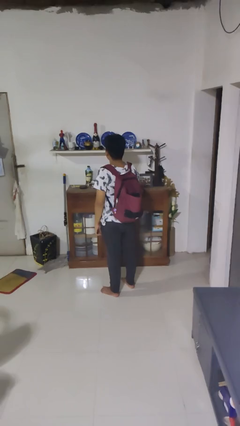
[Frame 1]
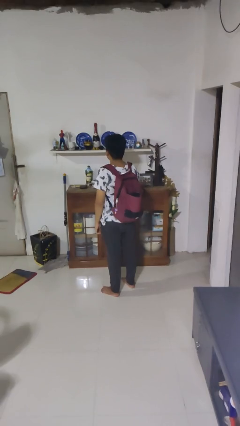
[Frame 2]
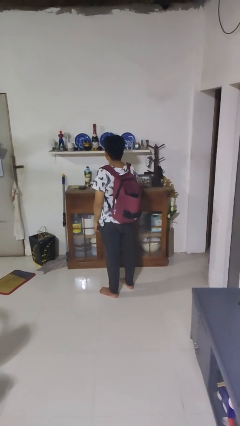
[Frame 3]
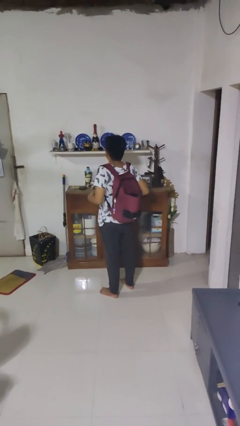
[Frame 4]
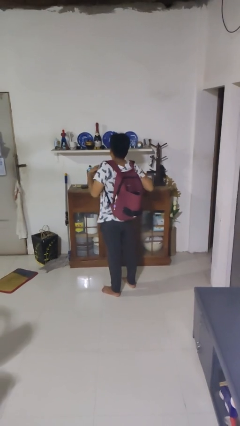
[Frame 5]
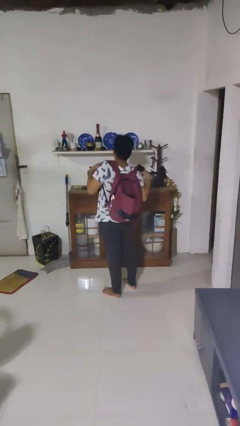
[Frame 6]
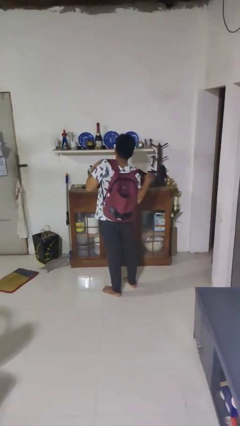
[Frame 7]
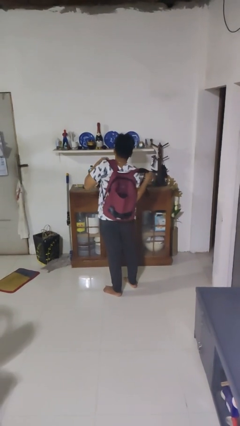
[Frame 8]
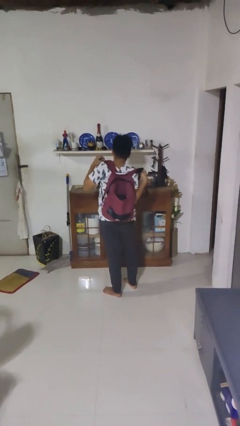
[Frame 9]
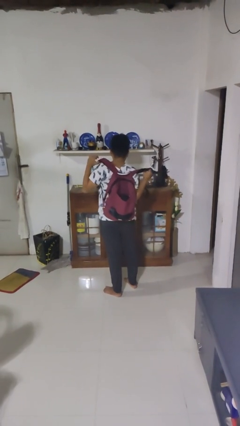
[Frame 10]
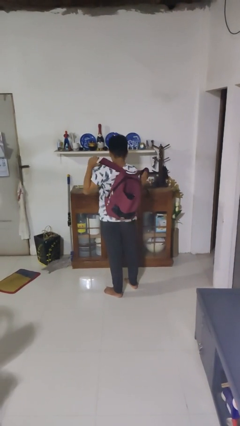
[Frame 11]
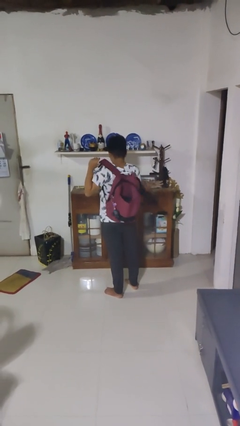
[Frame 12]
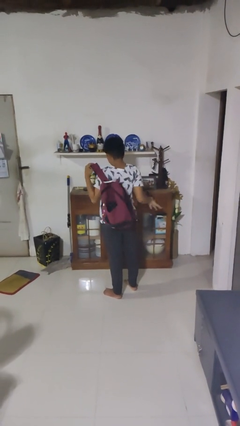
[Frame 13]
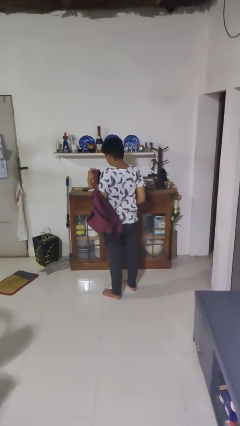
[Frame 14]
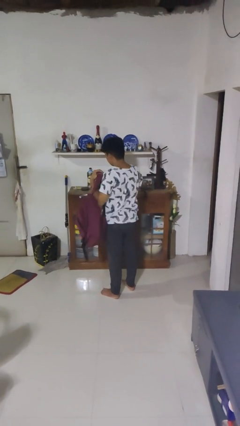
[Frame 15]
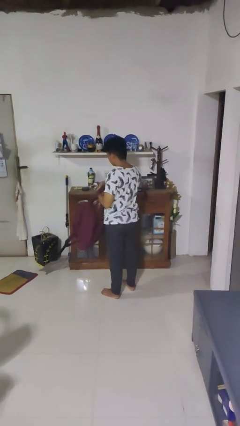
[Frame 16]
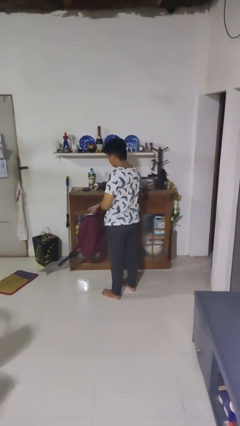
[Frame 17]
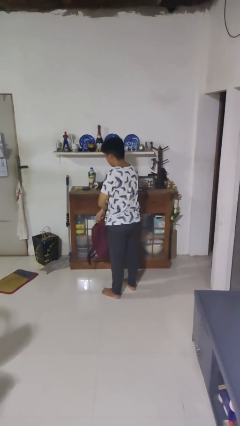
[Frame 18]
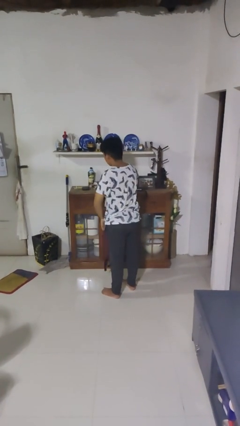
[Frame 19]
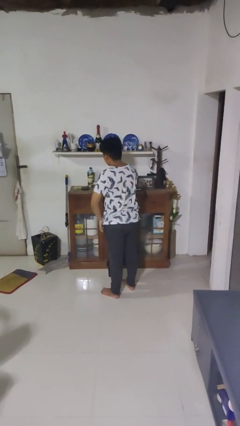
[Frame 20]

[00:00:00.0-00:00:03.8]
person takes off backpack

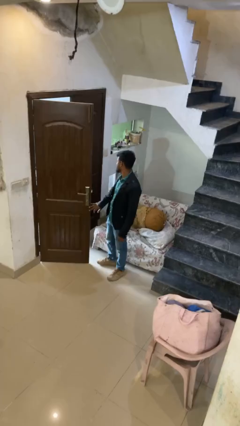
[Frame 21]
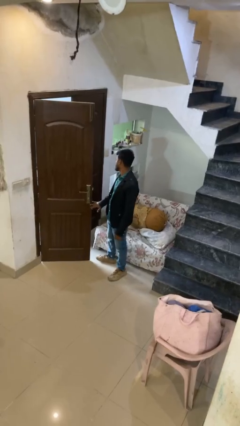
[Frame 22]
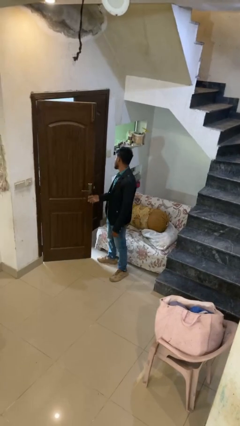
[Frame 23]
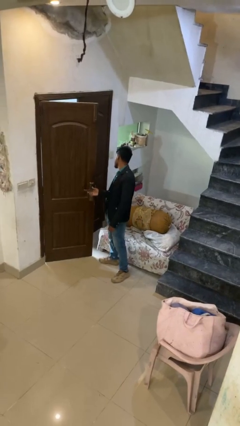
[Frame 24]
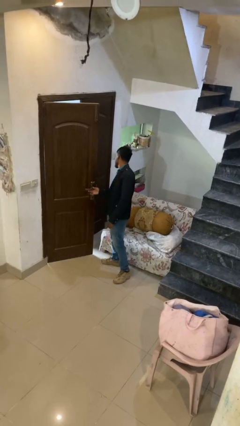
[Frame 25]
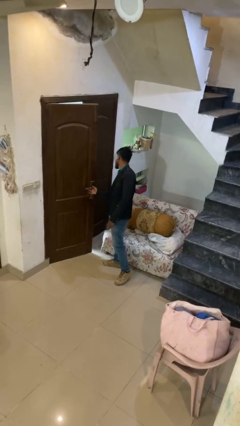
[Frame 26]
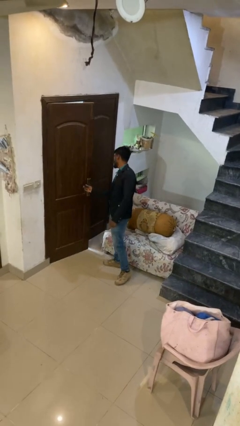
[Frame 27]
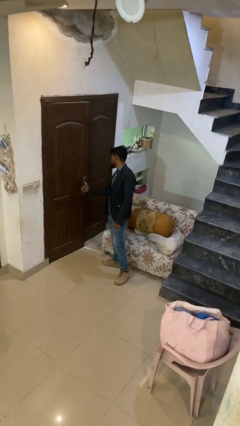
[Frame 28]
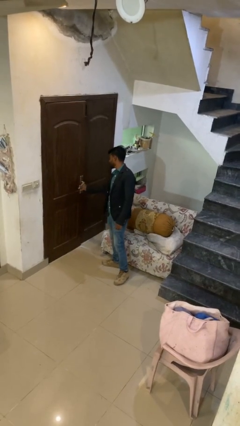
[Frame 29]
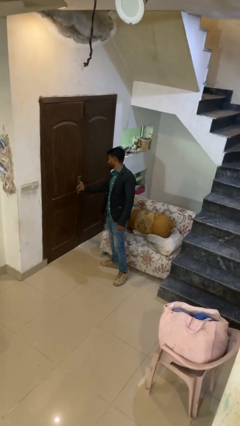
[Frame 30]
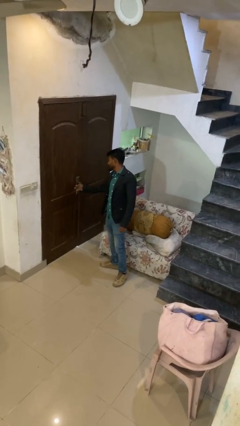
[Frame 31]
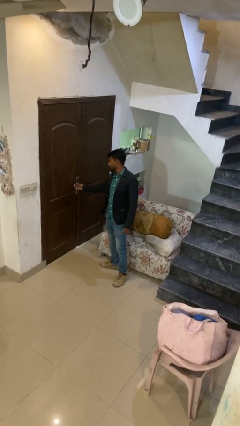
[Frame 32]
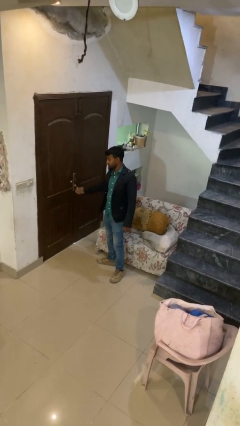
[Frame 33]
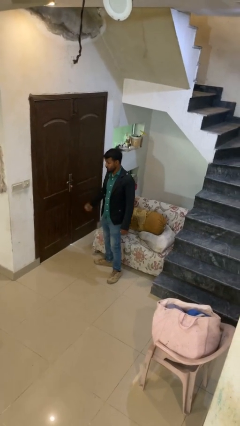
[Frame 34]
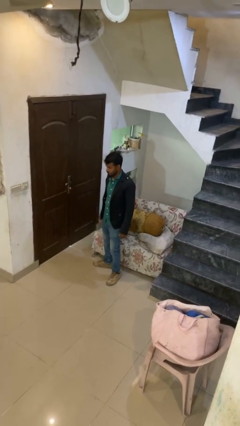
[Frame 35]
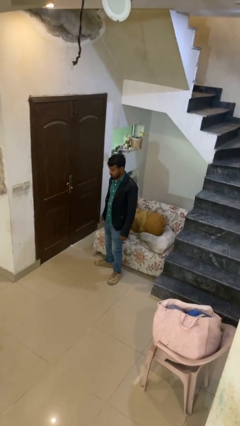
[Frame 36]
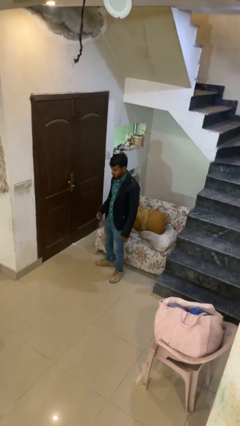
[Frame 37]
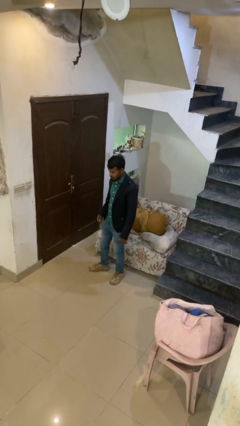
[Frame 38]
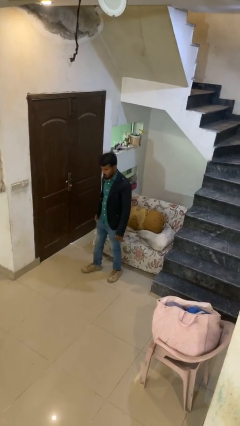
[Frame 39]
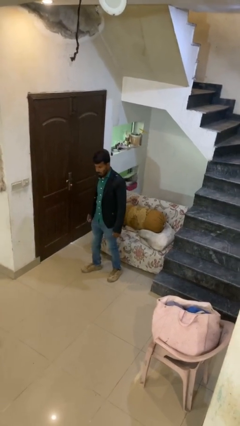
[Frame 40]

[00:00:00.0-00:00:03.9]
person closes facility door

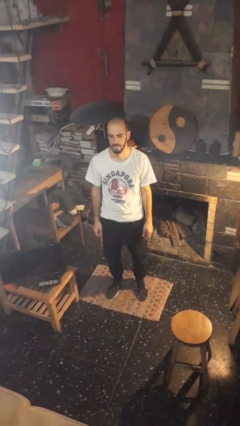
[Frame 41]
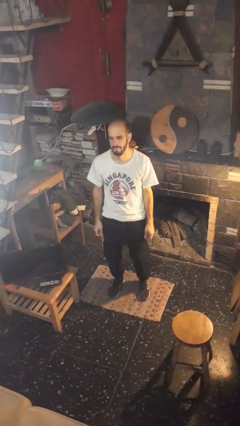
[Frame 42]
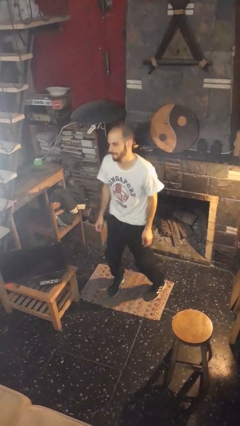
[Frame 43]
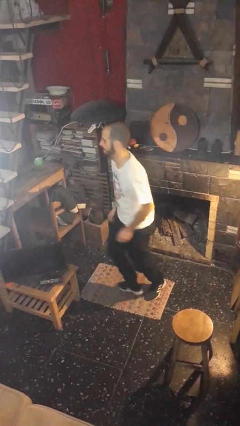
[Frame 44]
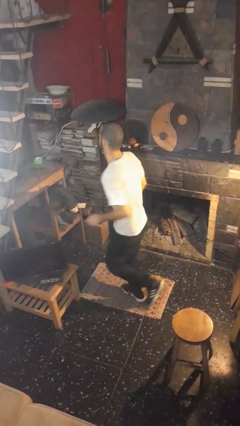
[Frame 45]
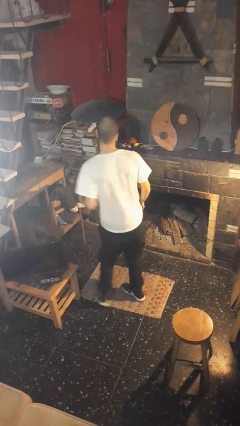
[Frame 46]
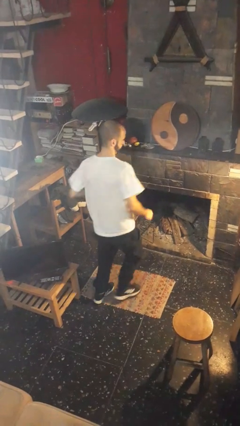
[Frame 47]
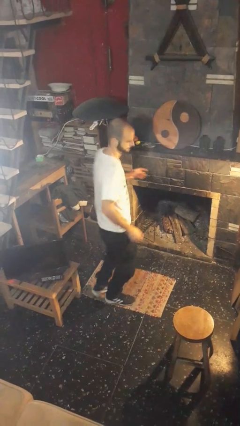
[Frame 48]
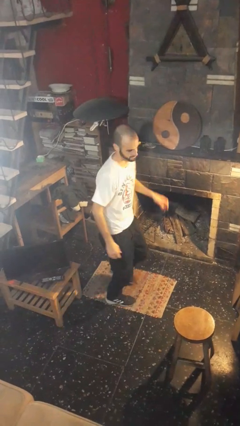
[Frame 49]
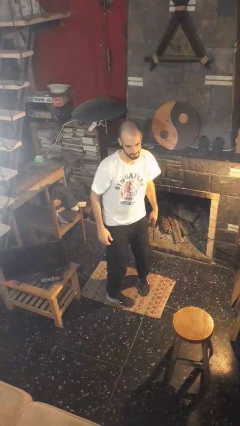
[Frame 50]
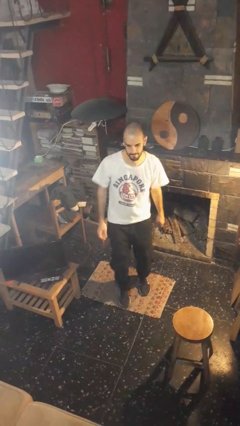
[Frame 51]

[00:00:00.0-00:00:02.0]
person twirls

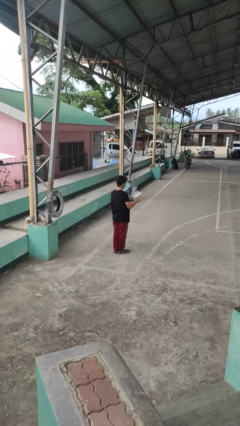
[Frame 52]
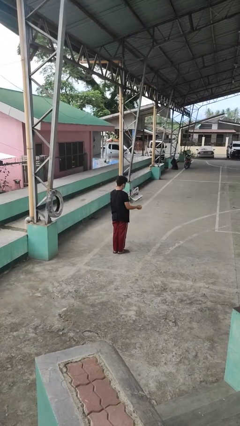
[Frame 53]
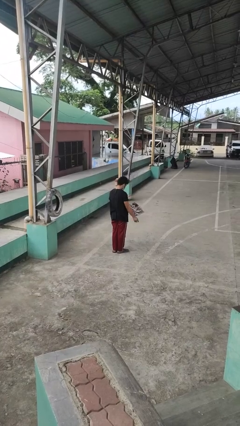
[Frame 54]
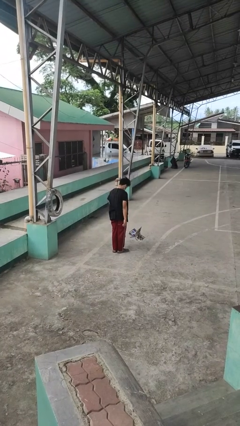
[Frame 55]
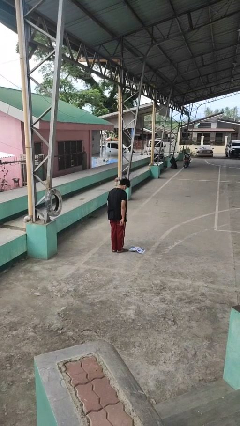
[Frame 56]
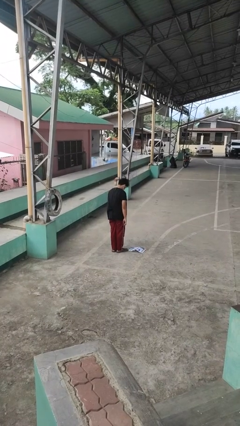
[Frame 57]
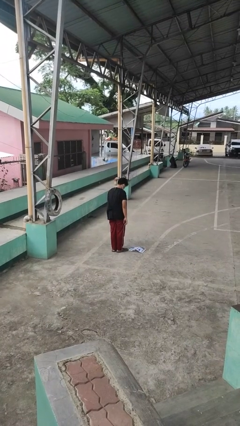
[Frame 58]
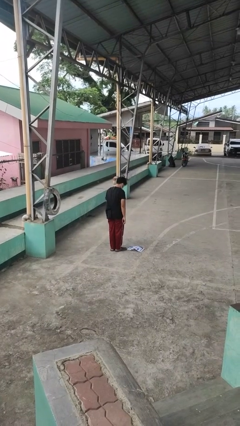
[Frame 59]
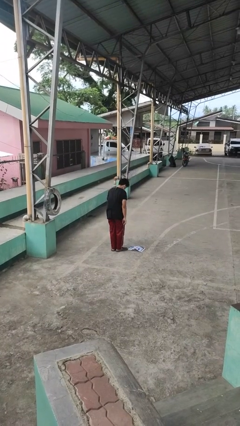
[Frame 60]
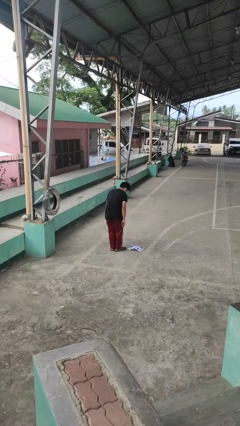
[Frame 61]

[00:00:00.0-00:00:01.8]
person drops object

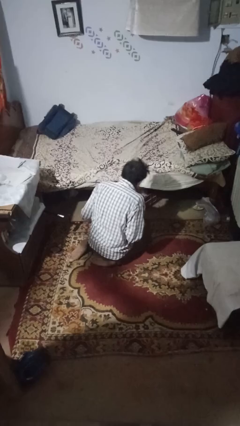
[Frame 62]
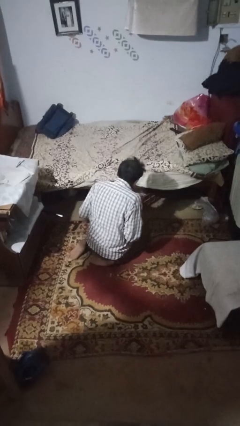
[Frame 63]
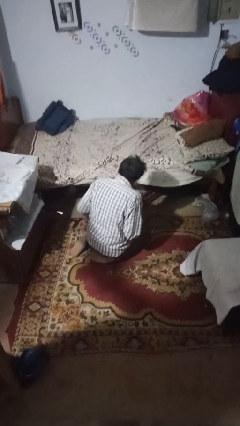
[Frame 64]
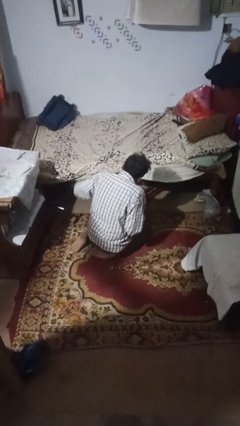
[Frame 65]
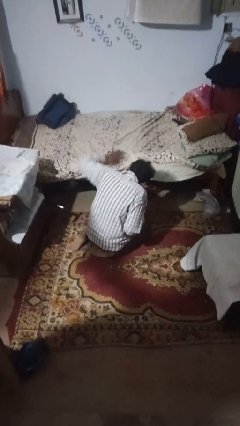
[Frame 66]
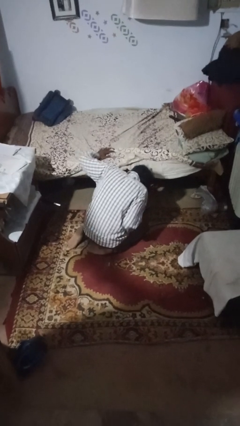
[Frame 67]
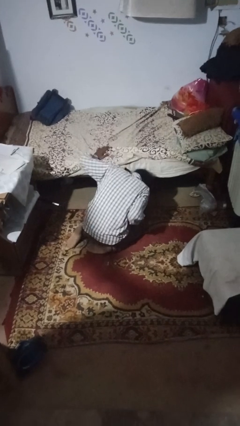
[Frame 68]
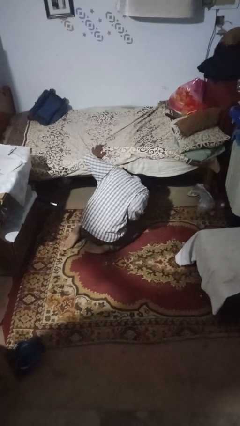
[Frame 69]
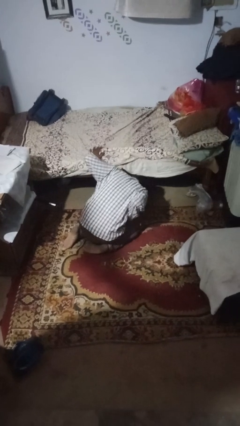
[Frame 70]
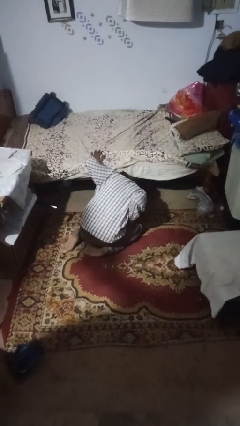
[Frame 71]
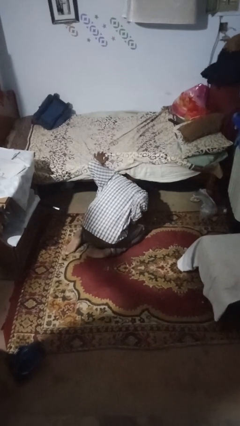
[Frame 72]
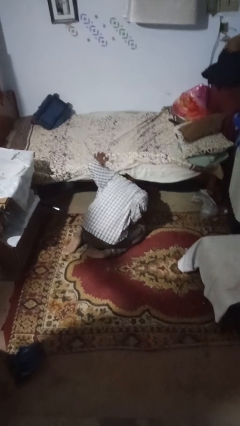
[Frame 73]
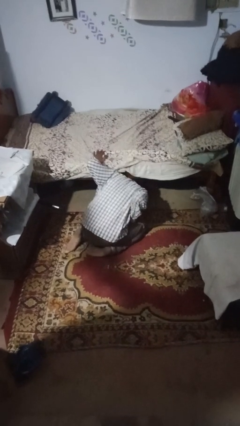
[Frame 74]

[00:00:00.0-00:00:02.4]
person searches under bed

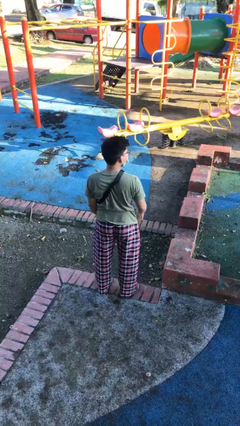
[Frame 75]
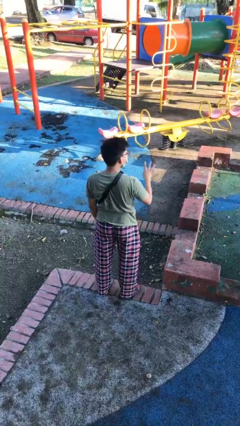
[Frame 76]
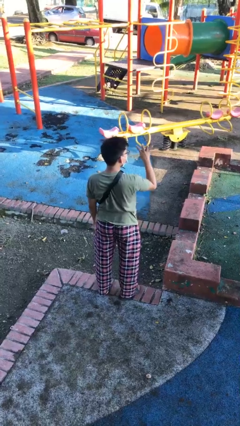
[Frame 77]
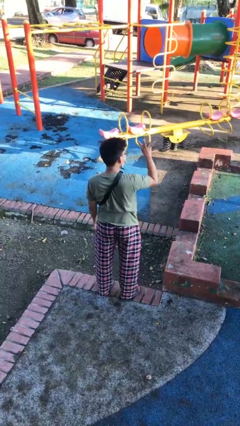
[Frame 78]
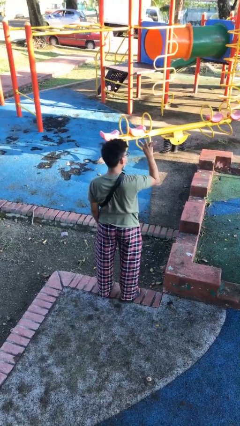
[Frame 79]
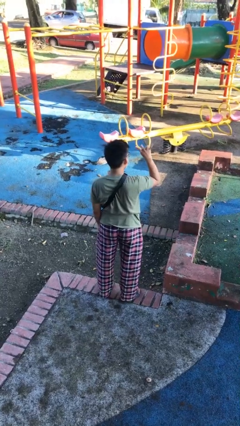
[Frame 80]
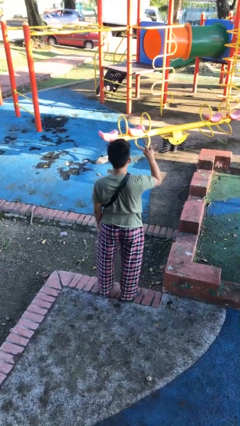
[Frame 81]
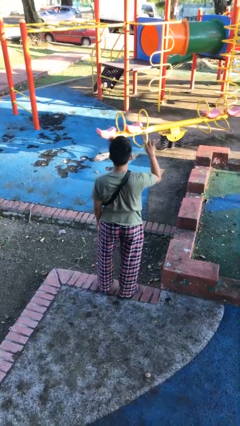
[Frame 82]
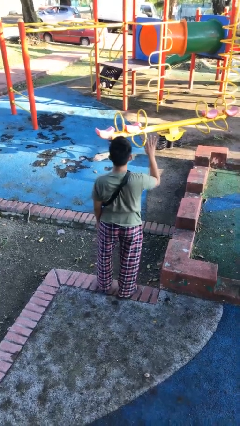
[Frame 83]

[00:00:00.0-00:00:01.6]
person gestures number four

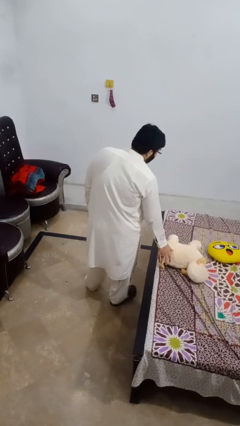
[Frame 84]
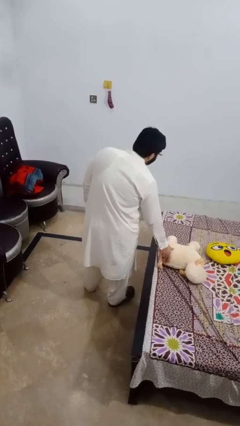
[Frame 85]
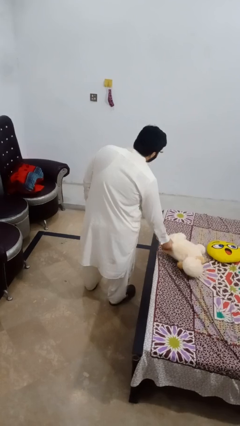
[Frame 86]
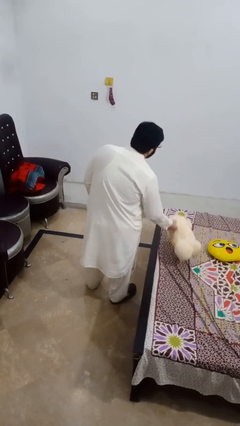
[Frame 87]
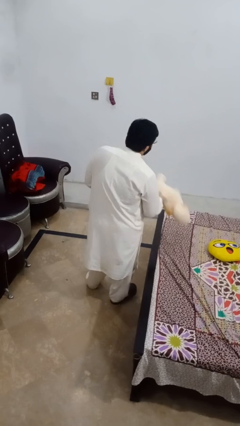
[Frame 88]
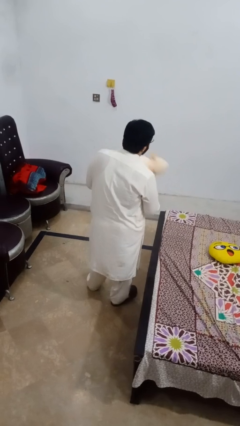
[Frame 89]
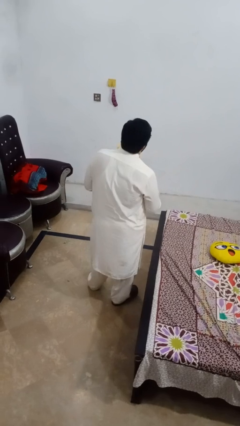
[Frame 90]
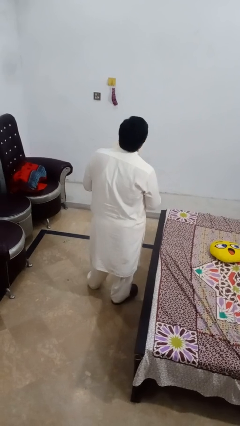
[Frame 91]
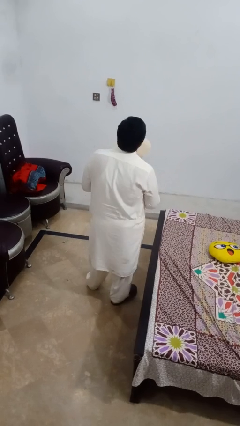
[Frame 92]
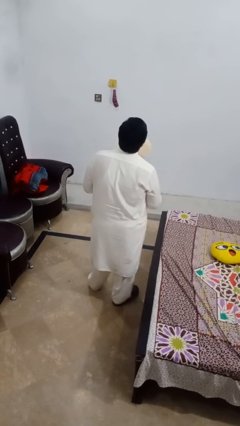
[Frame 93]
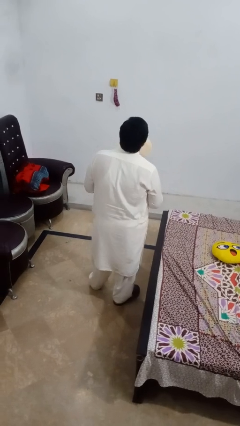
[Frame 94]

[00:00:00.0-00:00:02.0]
person picks up object from bed
